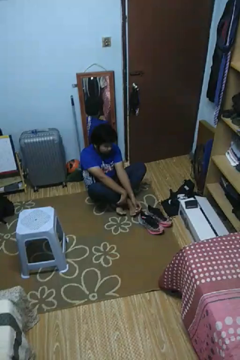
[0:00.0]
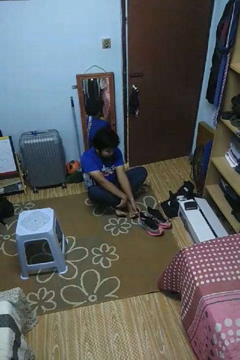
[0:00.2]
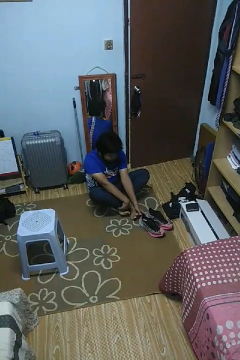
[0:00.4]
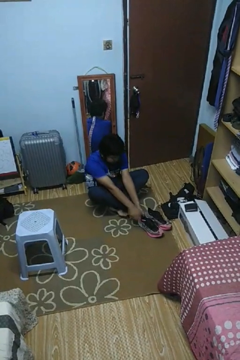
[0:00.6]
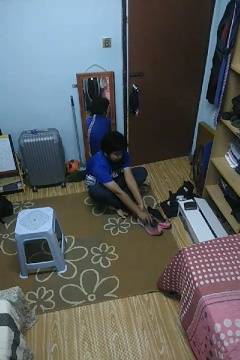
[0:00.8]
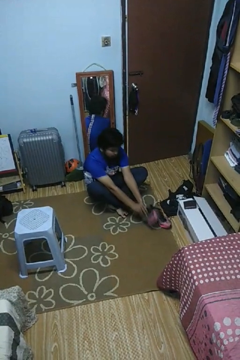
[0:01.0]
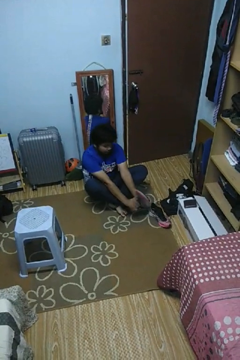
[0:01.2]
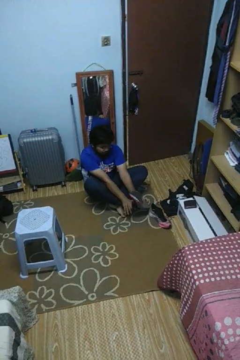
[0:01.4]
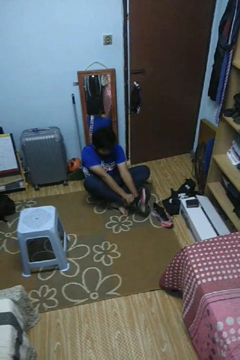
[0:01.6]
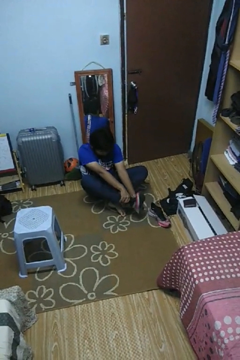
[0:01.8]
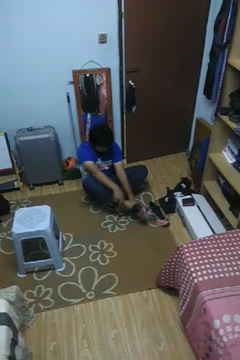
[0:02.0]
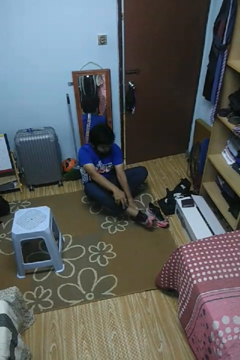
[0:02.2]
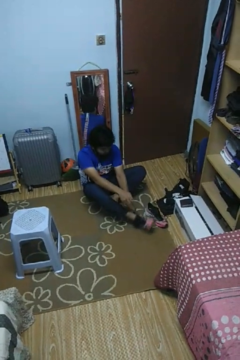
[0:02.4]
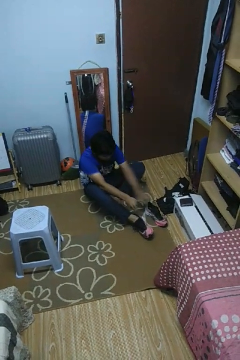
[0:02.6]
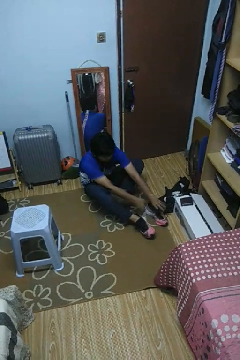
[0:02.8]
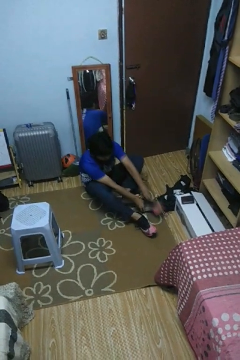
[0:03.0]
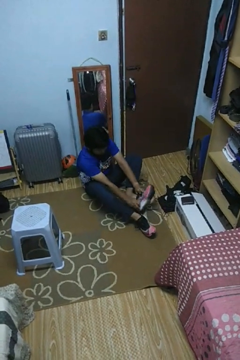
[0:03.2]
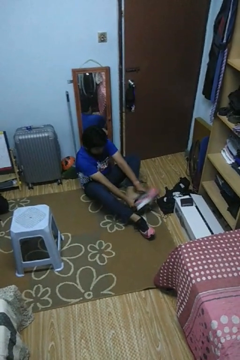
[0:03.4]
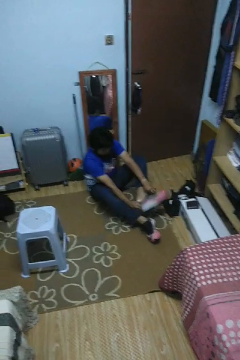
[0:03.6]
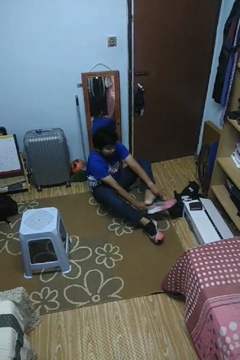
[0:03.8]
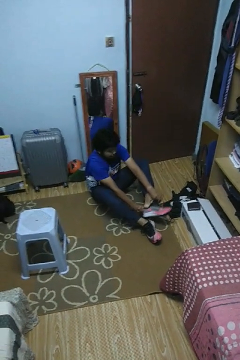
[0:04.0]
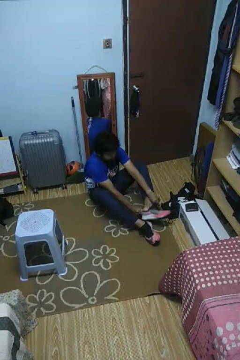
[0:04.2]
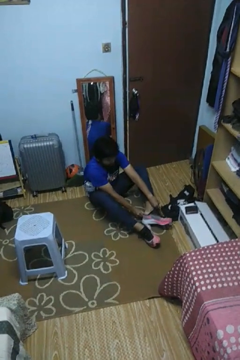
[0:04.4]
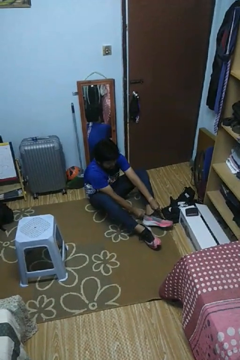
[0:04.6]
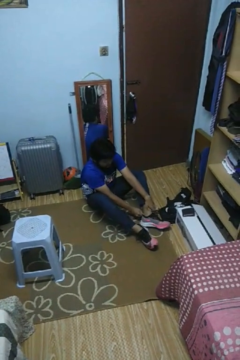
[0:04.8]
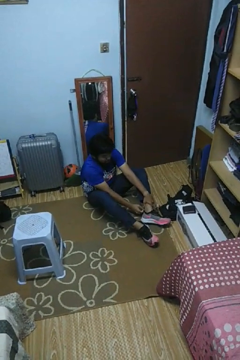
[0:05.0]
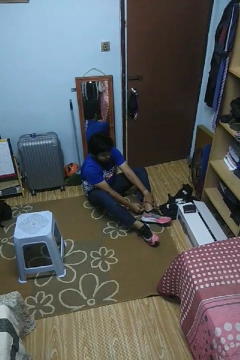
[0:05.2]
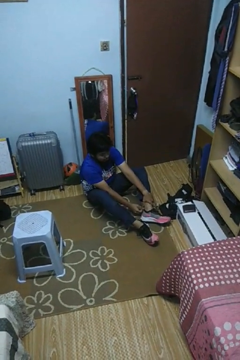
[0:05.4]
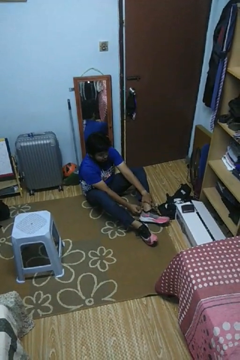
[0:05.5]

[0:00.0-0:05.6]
person puts on shoes

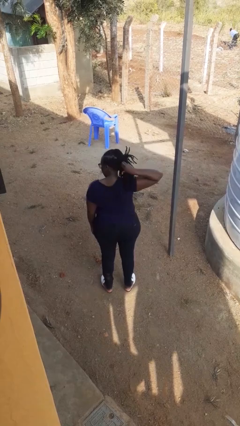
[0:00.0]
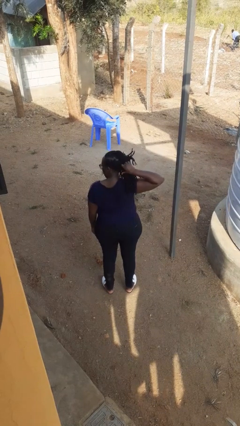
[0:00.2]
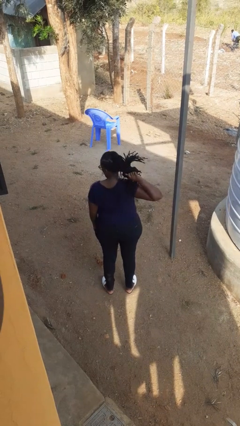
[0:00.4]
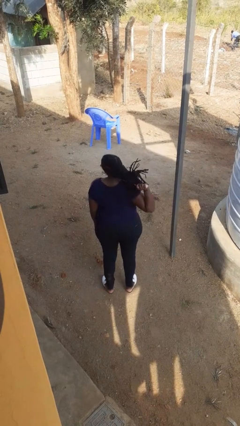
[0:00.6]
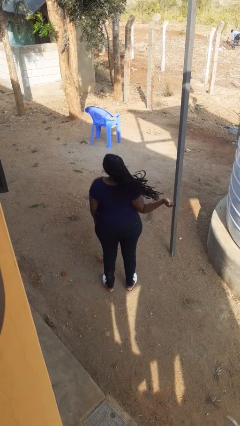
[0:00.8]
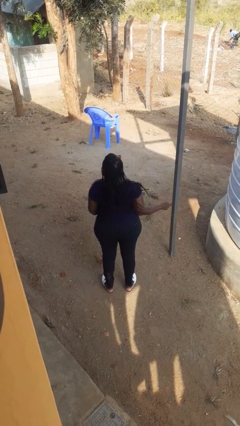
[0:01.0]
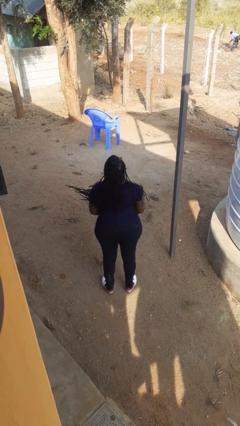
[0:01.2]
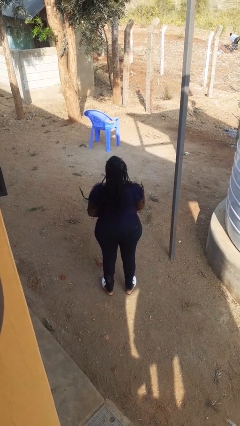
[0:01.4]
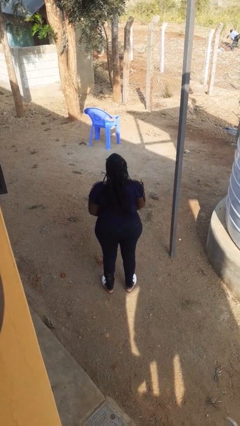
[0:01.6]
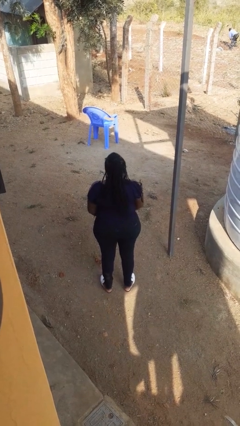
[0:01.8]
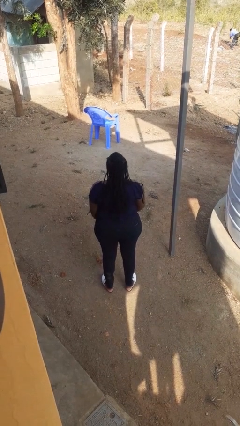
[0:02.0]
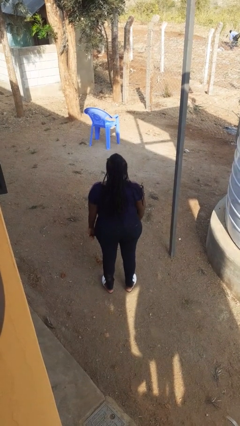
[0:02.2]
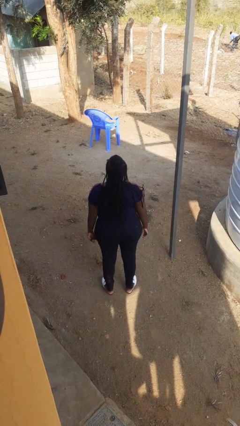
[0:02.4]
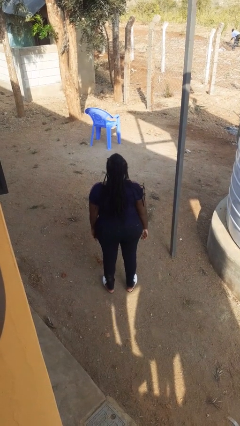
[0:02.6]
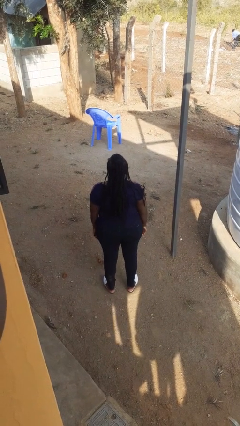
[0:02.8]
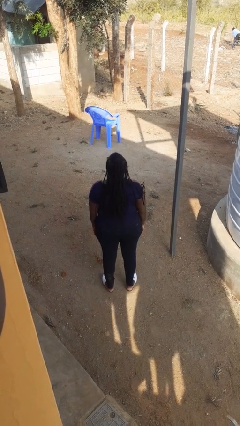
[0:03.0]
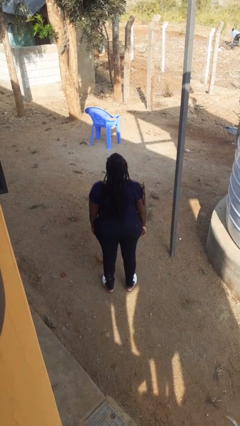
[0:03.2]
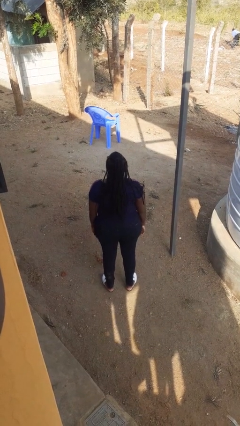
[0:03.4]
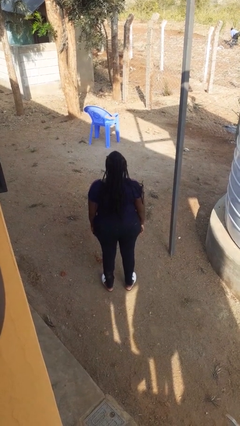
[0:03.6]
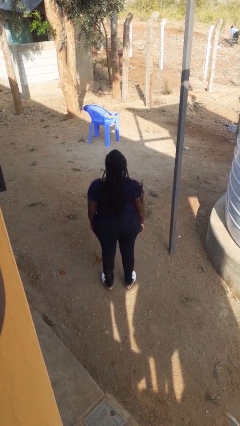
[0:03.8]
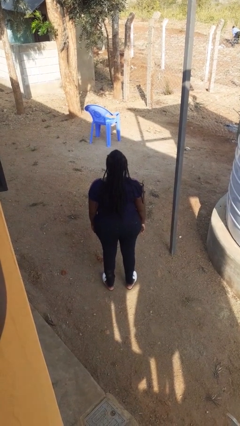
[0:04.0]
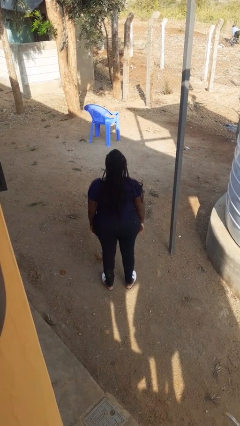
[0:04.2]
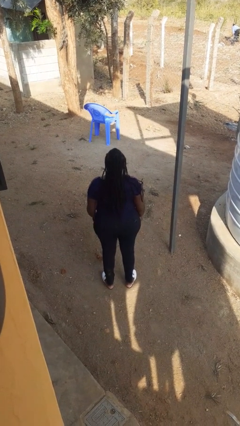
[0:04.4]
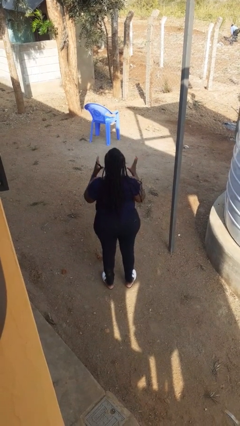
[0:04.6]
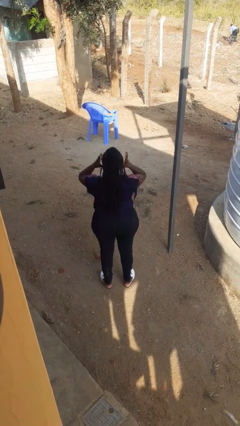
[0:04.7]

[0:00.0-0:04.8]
person takes off hairtie

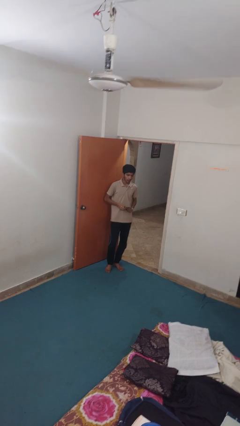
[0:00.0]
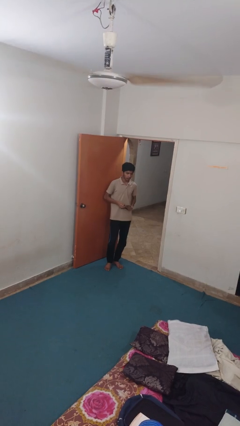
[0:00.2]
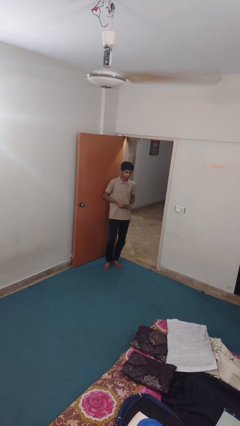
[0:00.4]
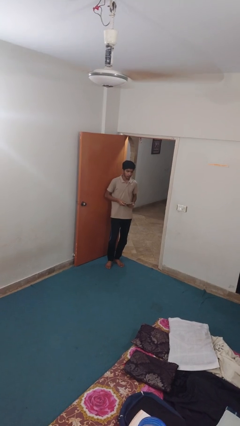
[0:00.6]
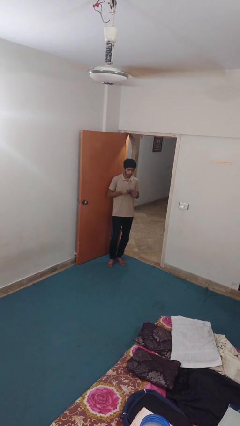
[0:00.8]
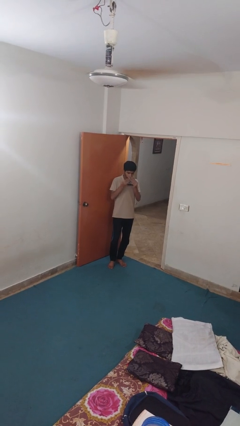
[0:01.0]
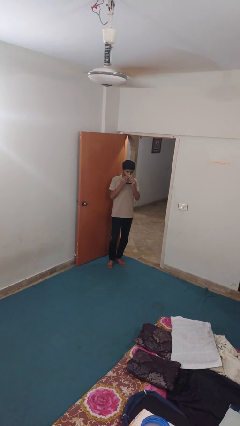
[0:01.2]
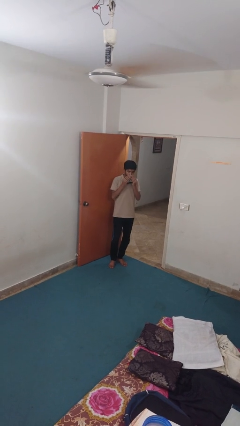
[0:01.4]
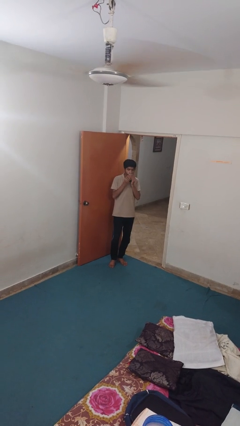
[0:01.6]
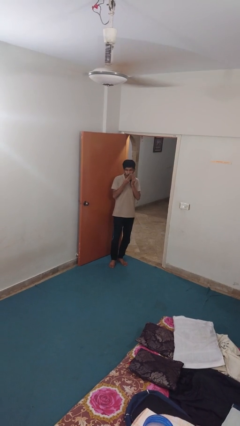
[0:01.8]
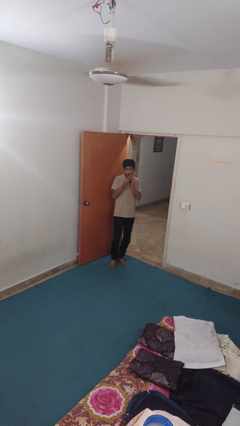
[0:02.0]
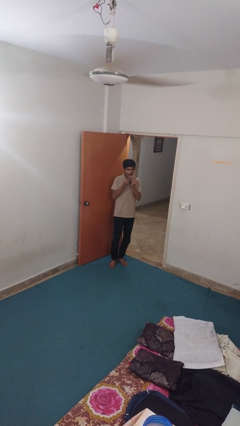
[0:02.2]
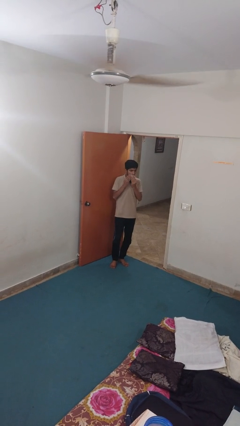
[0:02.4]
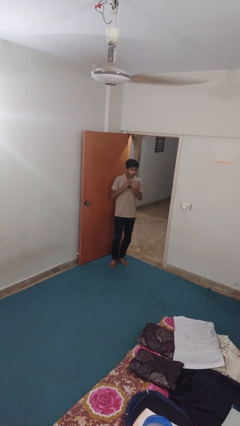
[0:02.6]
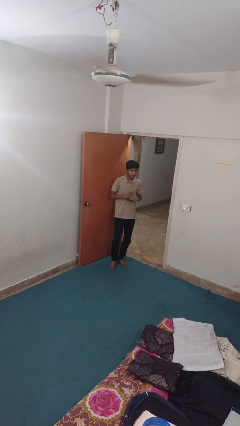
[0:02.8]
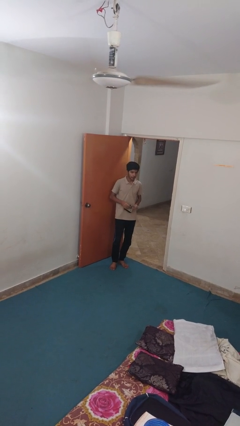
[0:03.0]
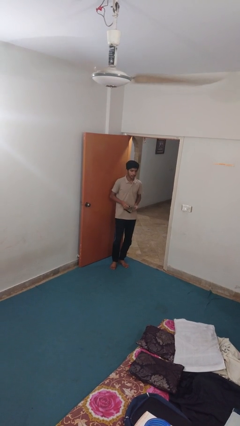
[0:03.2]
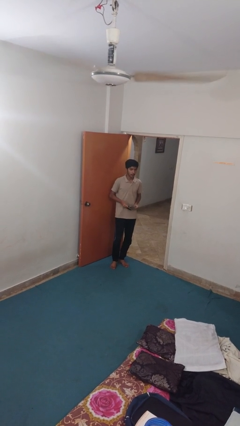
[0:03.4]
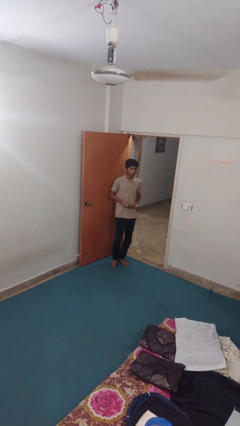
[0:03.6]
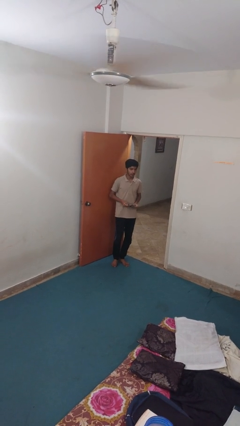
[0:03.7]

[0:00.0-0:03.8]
person wipes mouth with napkin

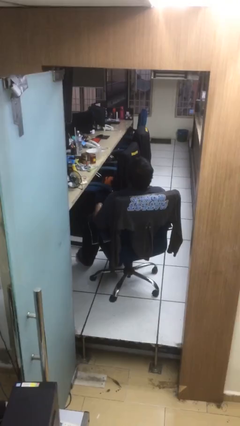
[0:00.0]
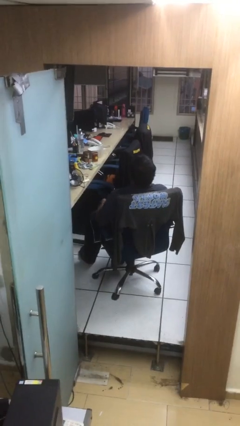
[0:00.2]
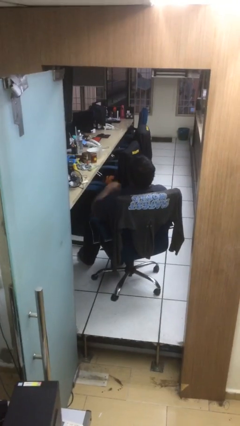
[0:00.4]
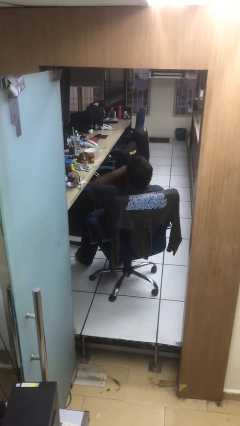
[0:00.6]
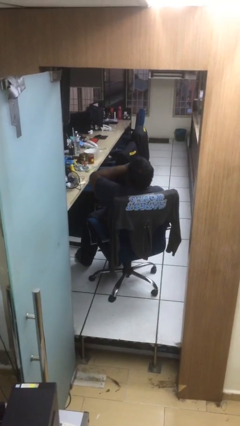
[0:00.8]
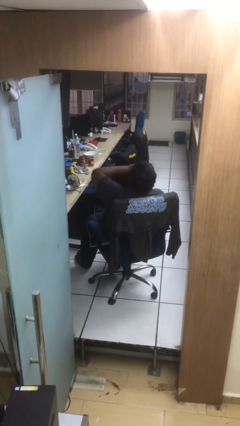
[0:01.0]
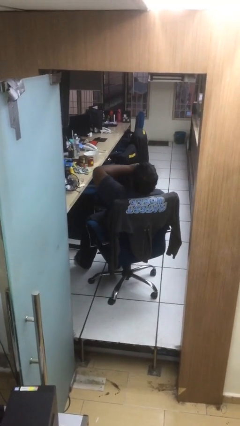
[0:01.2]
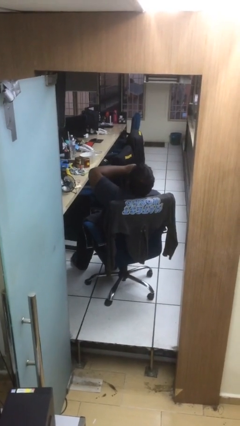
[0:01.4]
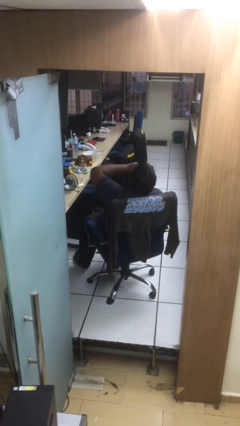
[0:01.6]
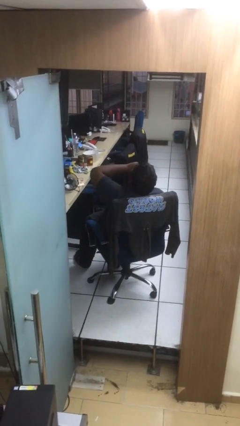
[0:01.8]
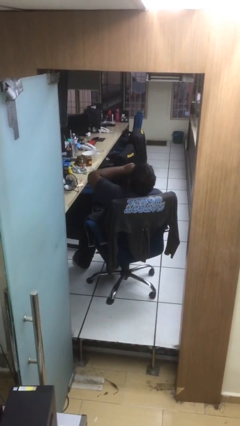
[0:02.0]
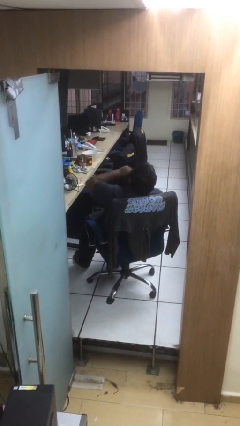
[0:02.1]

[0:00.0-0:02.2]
person yawns

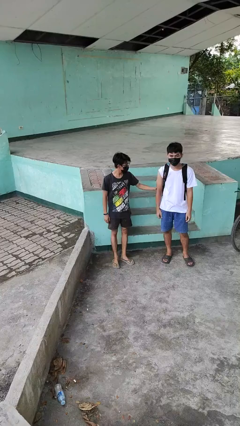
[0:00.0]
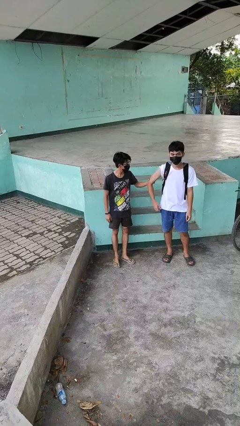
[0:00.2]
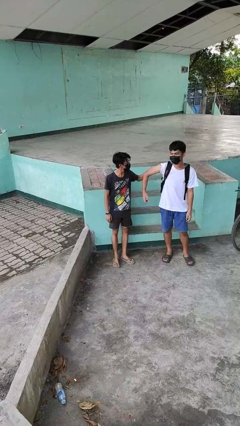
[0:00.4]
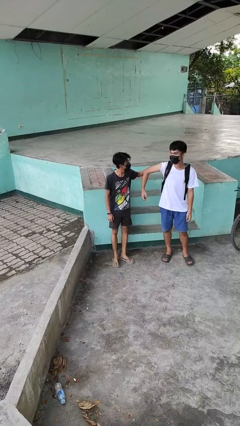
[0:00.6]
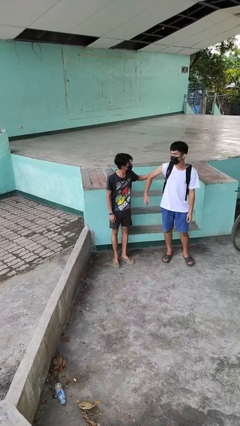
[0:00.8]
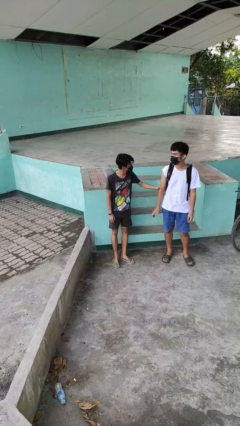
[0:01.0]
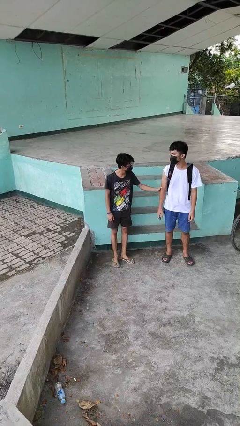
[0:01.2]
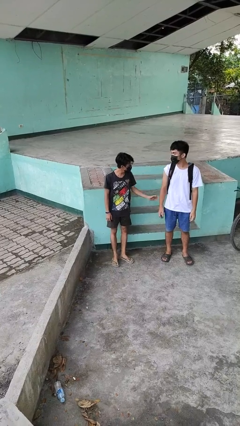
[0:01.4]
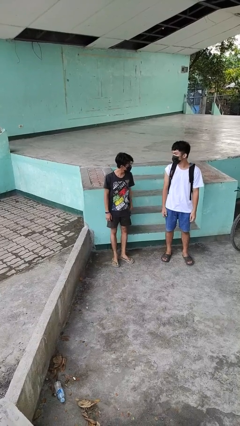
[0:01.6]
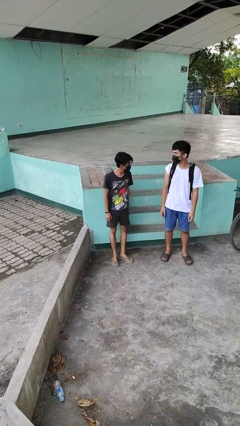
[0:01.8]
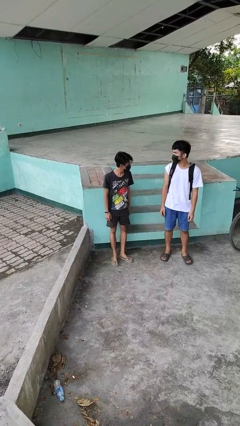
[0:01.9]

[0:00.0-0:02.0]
person grabs person by bicep

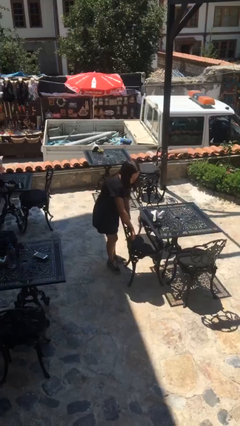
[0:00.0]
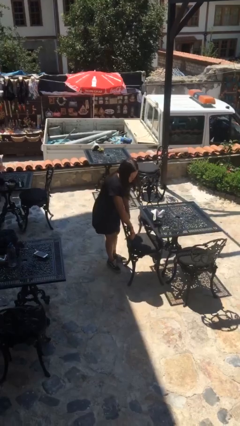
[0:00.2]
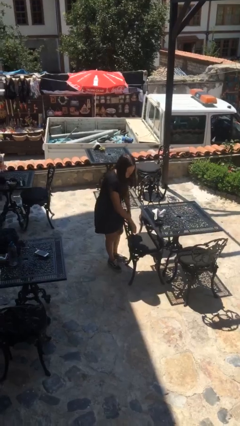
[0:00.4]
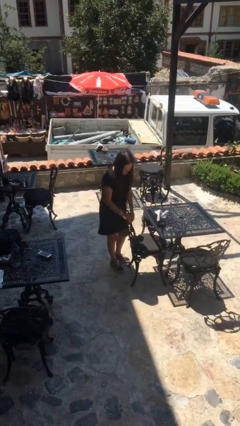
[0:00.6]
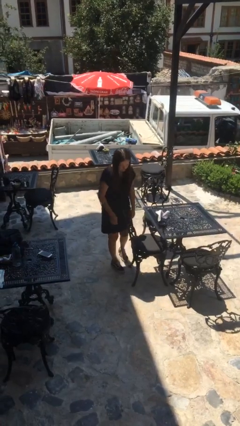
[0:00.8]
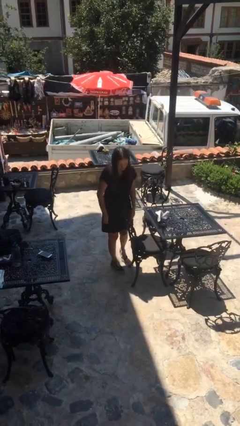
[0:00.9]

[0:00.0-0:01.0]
person puts down object on floor
